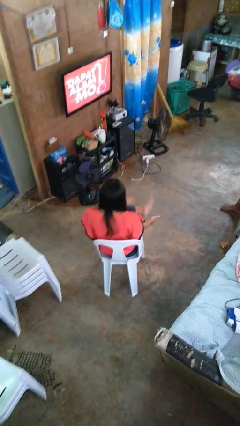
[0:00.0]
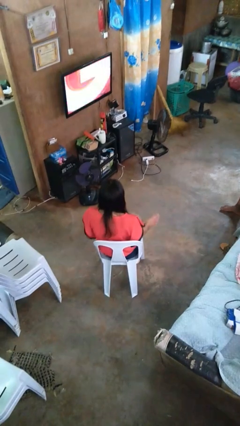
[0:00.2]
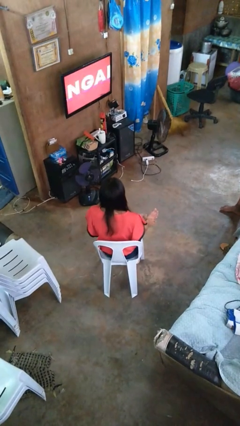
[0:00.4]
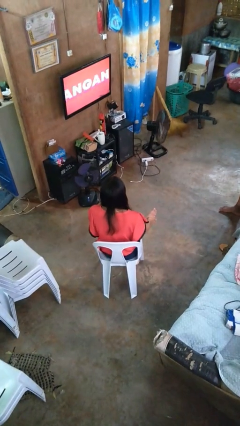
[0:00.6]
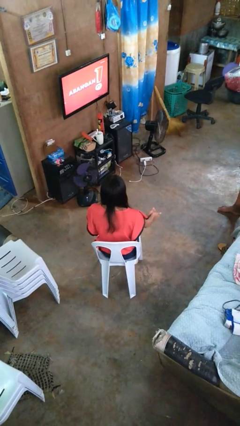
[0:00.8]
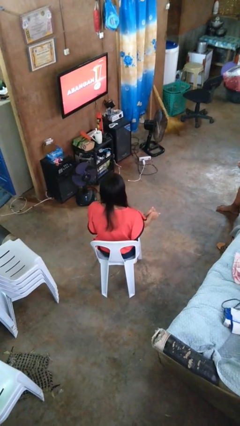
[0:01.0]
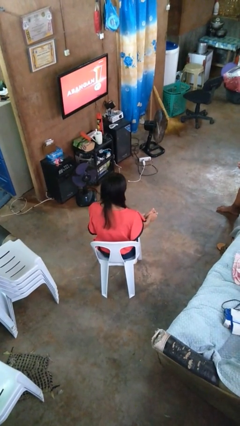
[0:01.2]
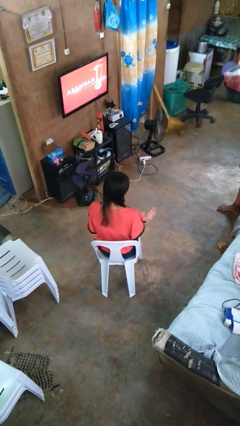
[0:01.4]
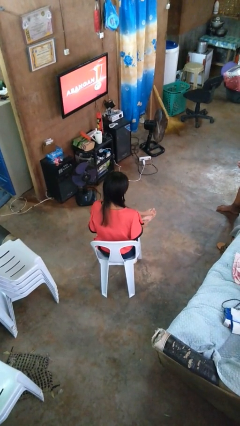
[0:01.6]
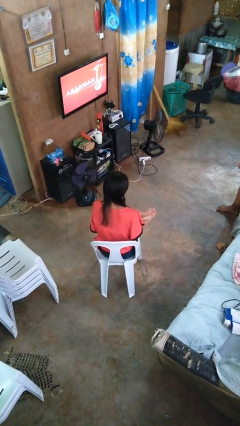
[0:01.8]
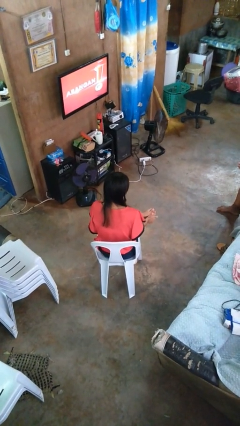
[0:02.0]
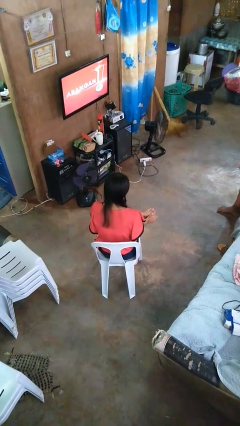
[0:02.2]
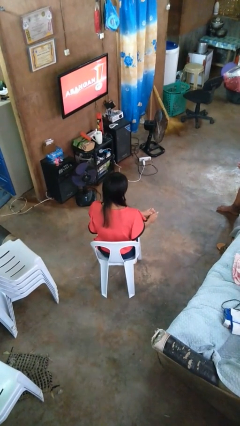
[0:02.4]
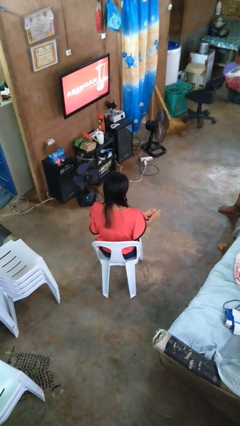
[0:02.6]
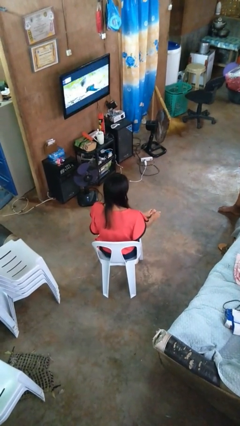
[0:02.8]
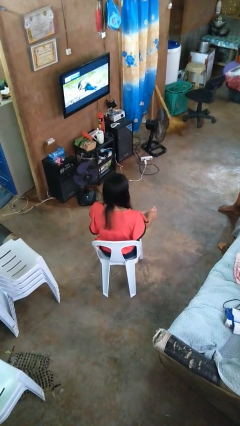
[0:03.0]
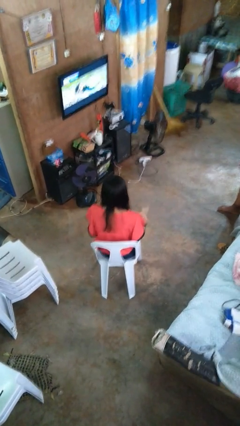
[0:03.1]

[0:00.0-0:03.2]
person rubs foot

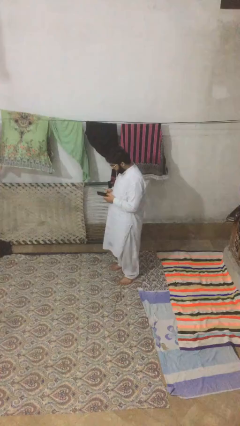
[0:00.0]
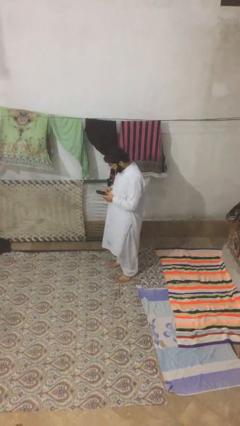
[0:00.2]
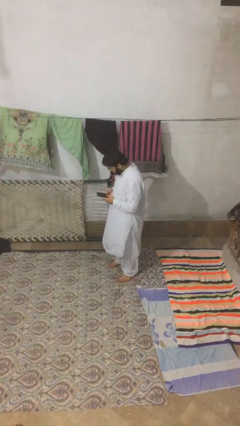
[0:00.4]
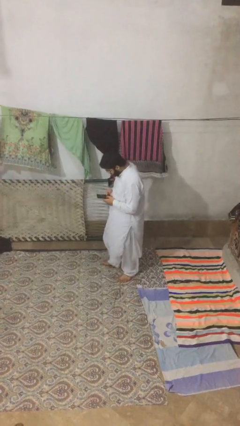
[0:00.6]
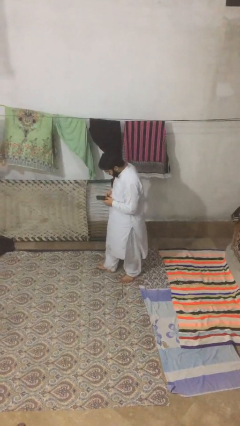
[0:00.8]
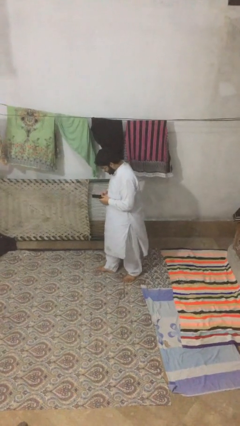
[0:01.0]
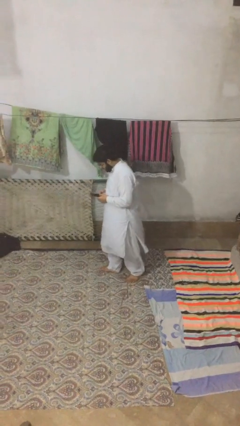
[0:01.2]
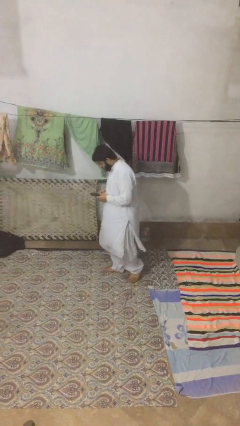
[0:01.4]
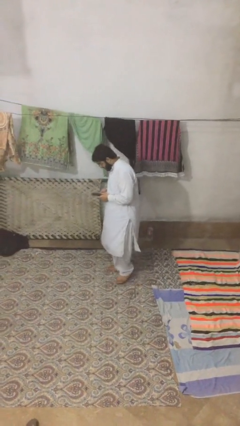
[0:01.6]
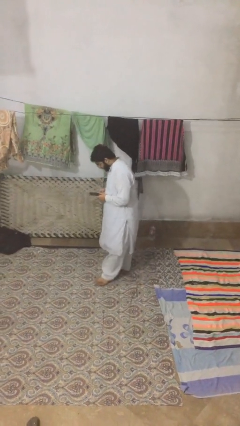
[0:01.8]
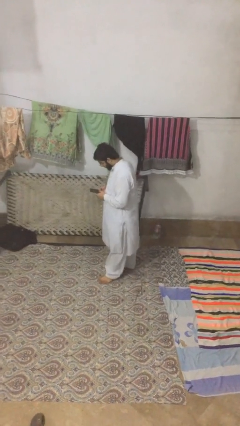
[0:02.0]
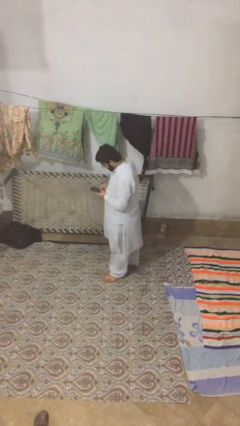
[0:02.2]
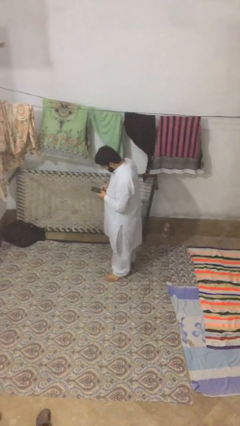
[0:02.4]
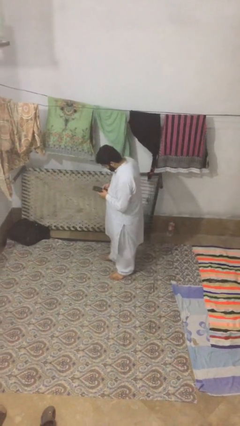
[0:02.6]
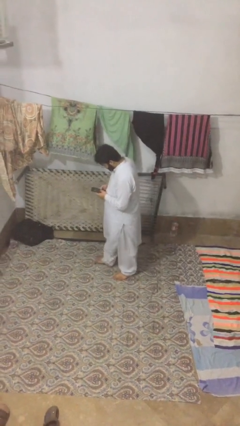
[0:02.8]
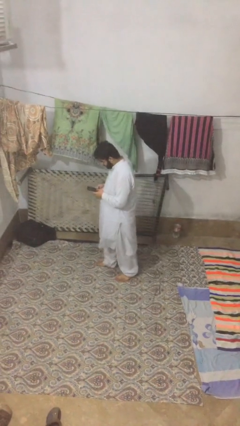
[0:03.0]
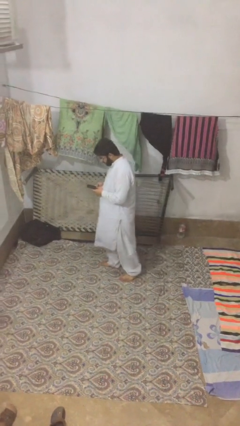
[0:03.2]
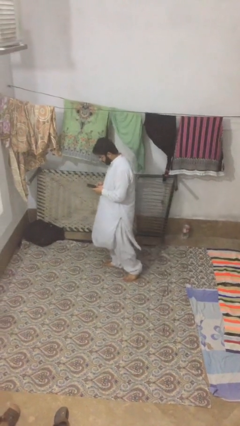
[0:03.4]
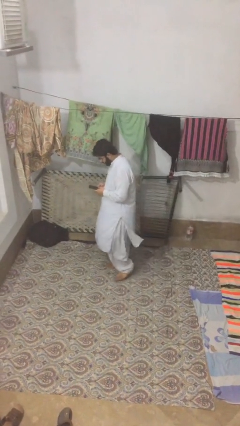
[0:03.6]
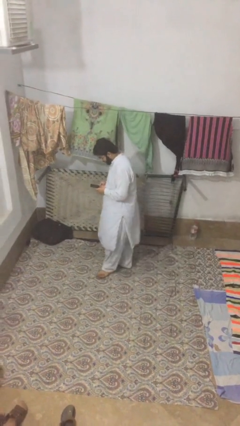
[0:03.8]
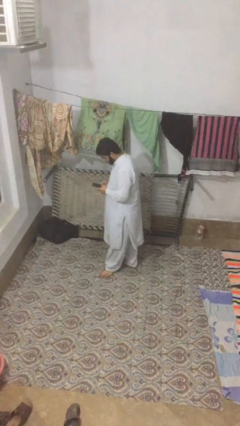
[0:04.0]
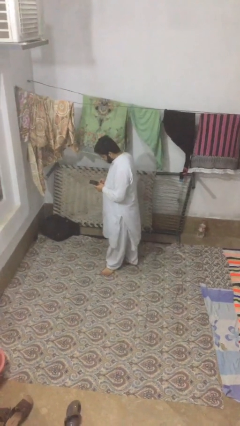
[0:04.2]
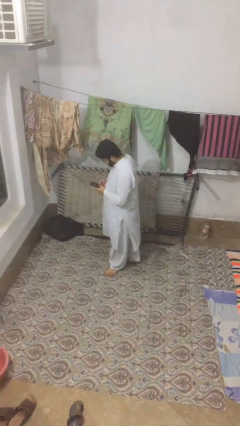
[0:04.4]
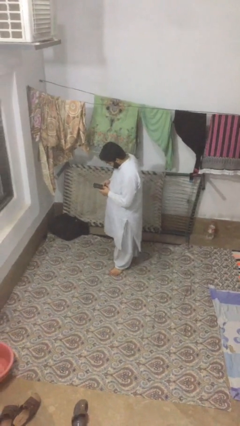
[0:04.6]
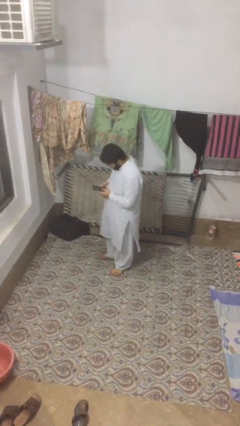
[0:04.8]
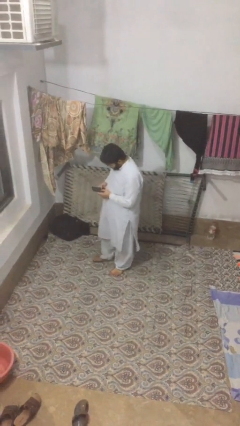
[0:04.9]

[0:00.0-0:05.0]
person texts on phone

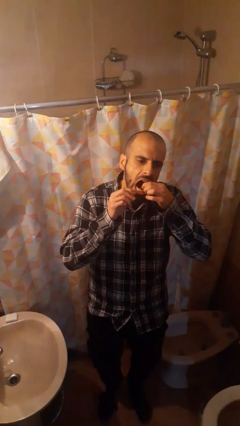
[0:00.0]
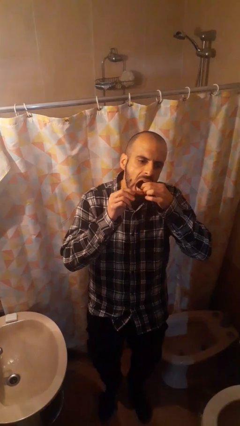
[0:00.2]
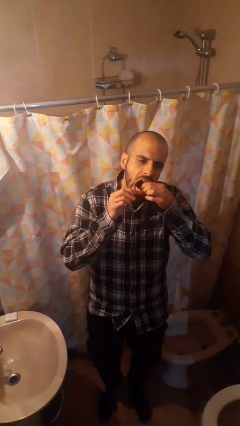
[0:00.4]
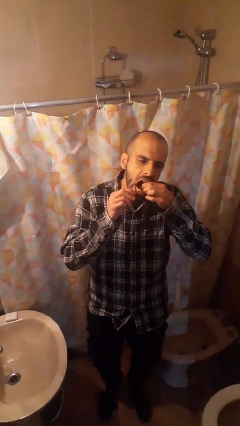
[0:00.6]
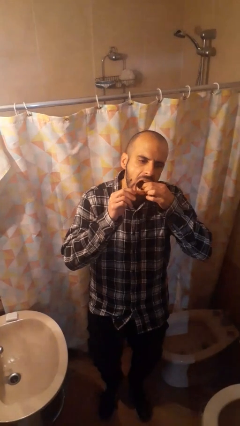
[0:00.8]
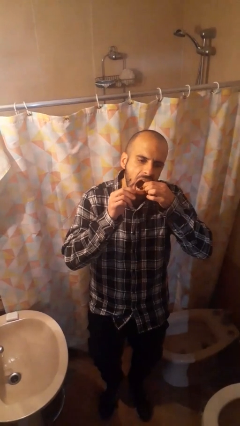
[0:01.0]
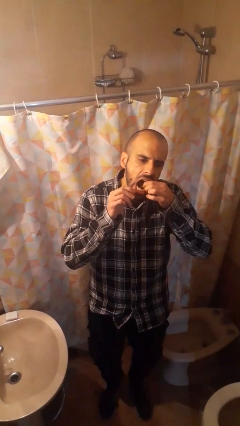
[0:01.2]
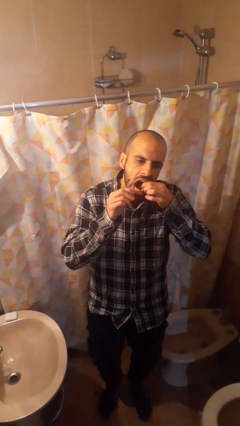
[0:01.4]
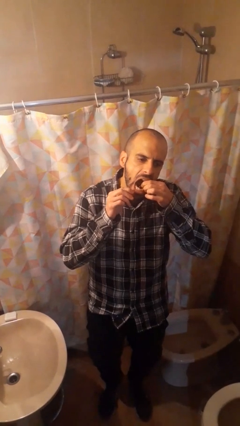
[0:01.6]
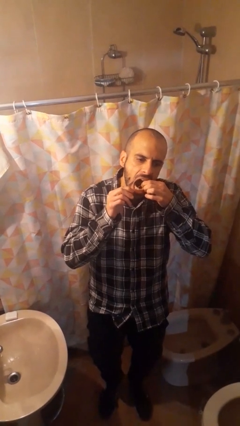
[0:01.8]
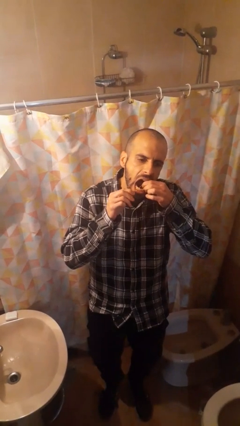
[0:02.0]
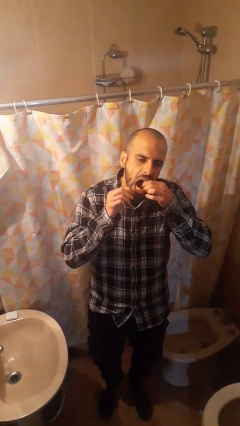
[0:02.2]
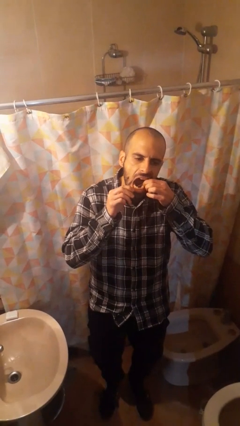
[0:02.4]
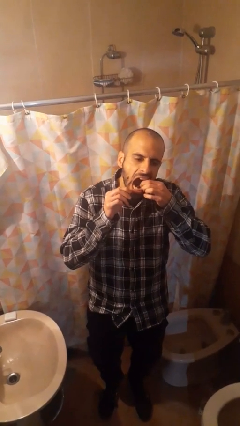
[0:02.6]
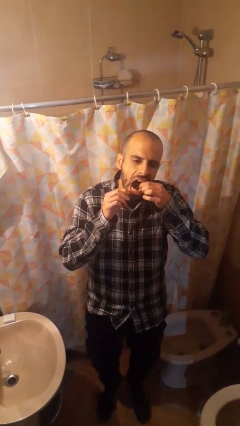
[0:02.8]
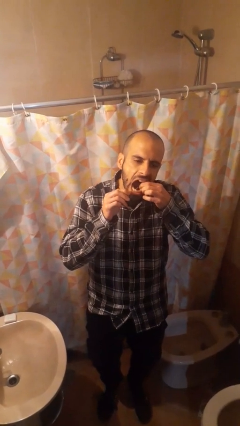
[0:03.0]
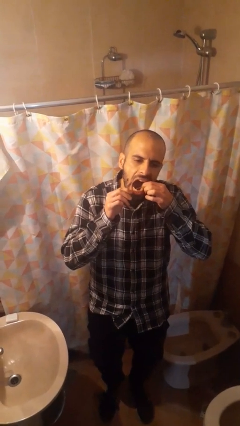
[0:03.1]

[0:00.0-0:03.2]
person flosses

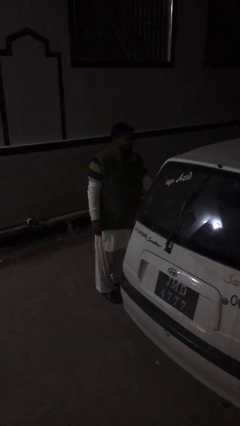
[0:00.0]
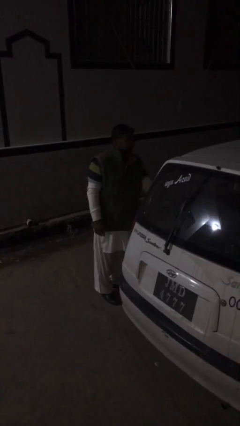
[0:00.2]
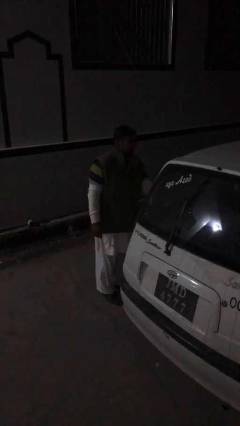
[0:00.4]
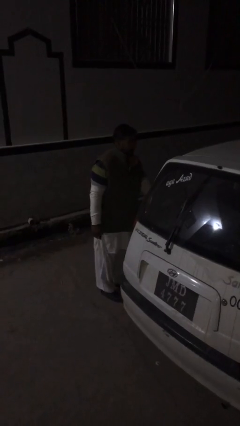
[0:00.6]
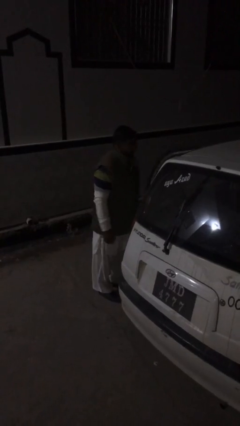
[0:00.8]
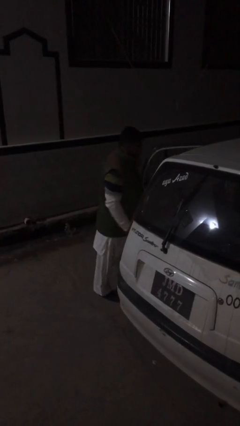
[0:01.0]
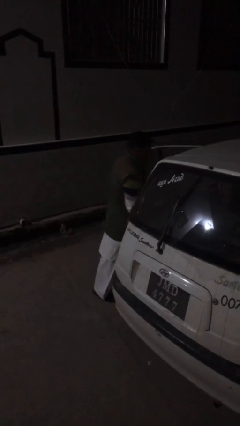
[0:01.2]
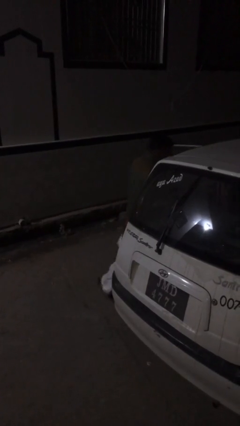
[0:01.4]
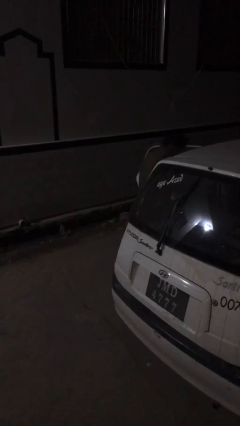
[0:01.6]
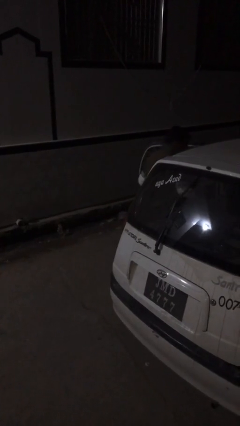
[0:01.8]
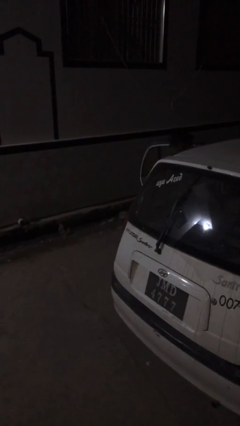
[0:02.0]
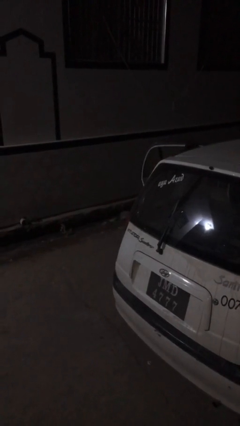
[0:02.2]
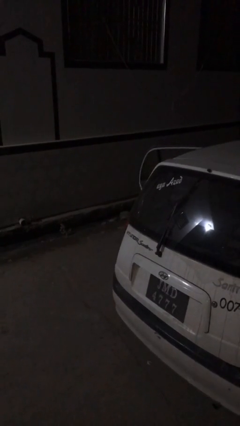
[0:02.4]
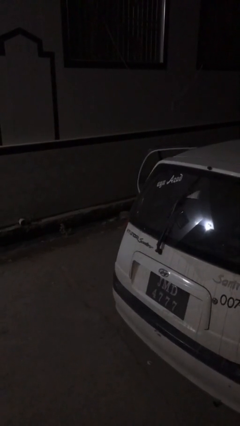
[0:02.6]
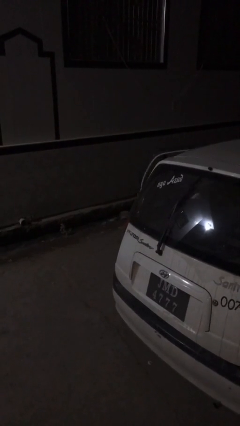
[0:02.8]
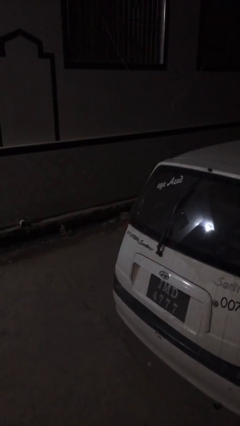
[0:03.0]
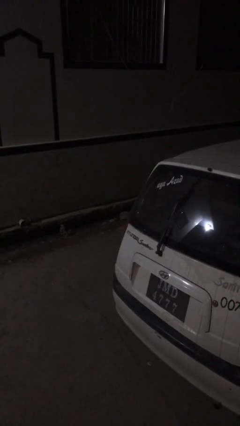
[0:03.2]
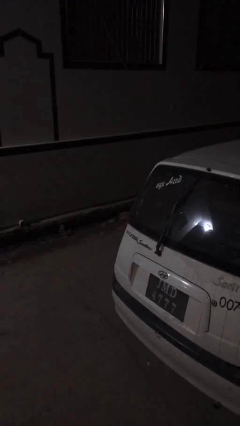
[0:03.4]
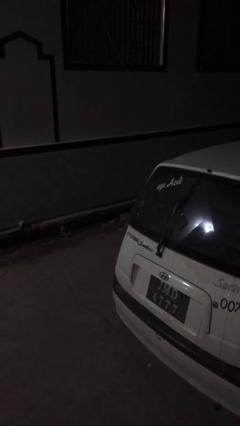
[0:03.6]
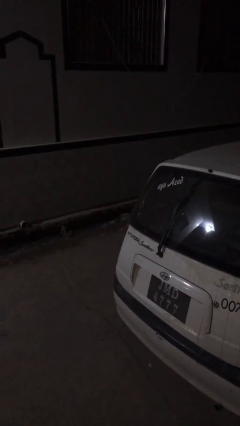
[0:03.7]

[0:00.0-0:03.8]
person enters car

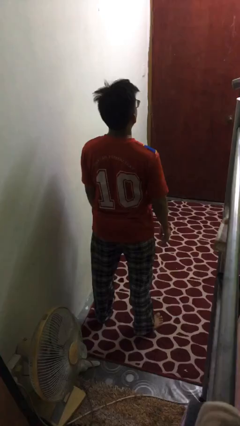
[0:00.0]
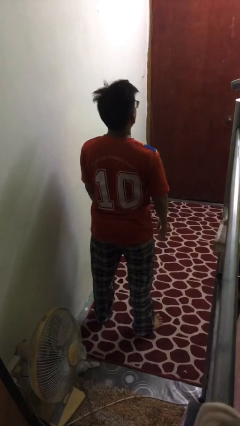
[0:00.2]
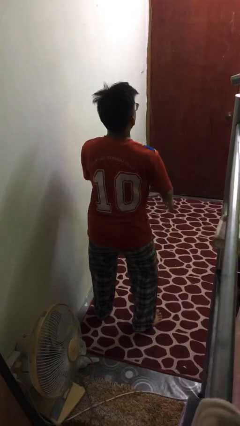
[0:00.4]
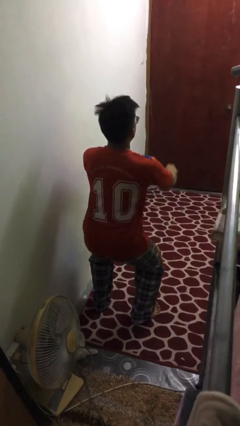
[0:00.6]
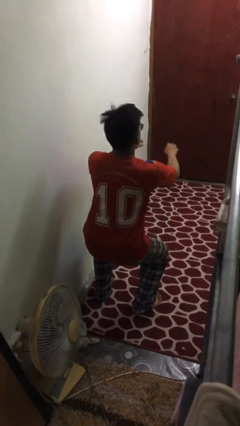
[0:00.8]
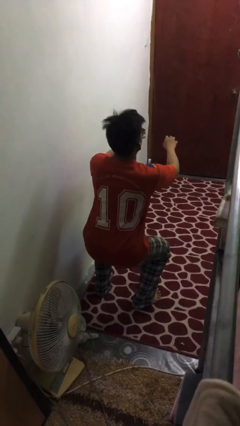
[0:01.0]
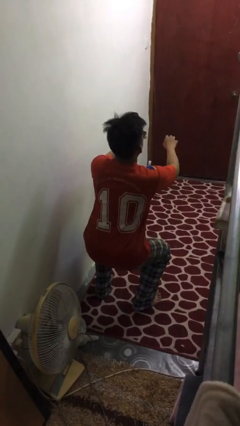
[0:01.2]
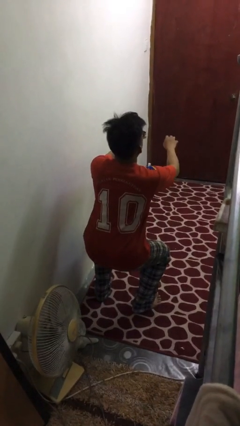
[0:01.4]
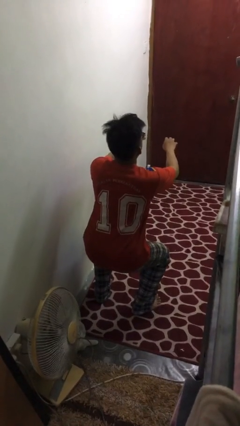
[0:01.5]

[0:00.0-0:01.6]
person squats

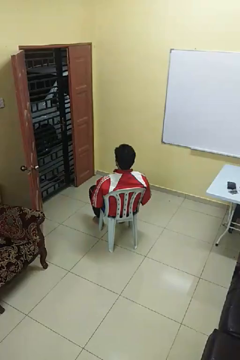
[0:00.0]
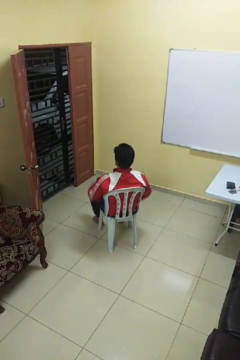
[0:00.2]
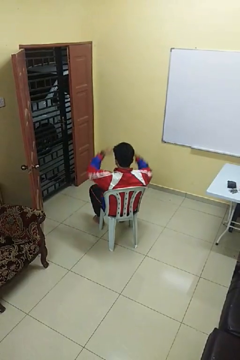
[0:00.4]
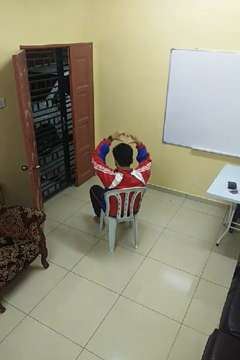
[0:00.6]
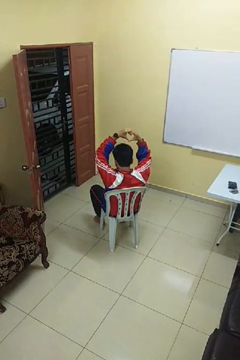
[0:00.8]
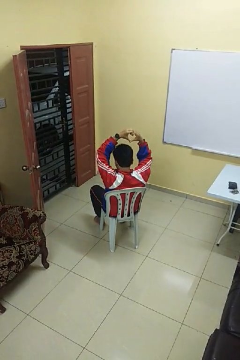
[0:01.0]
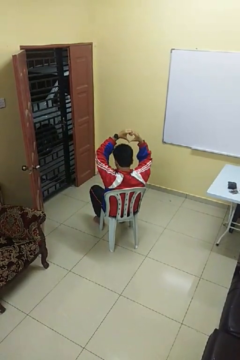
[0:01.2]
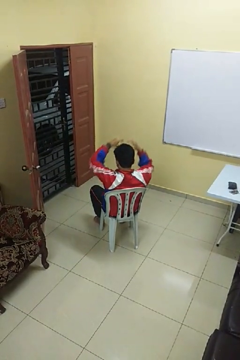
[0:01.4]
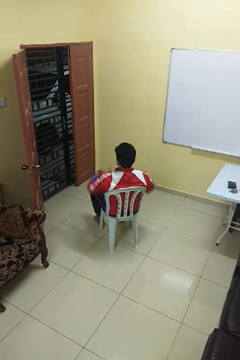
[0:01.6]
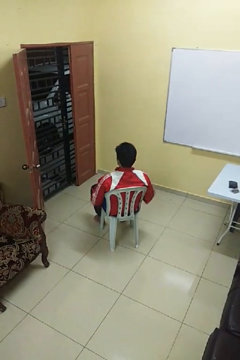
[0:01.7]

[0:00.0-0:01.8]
person gestures heart
